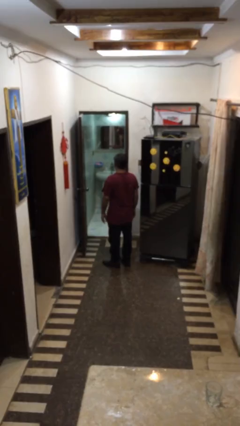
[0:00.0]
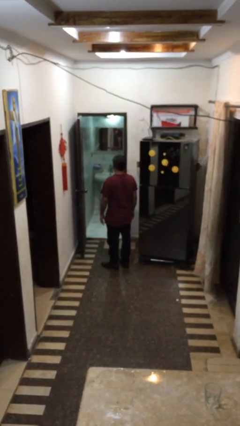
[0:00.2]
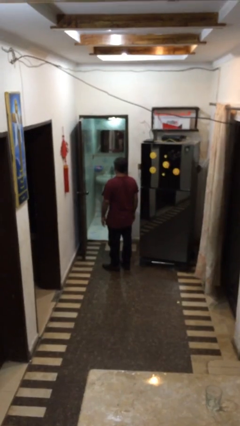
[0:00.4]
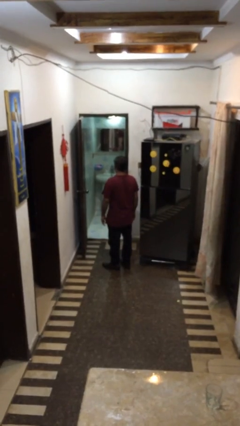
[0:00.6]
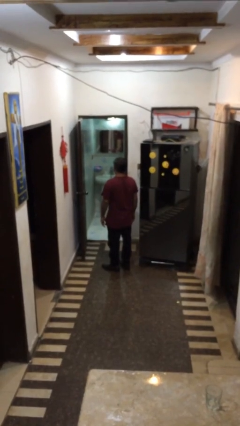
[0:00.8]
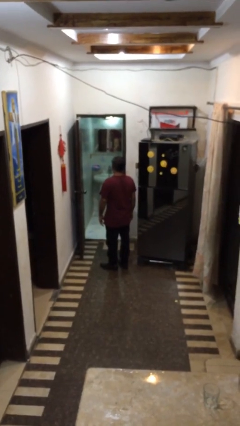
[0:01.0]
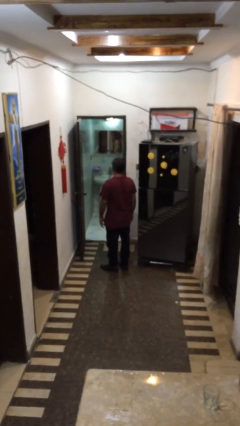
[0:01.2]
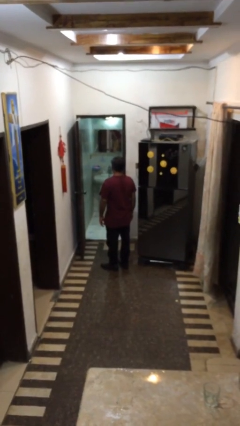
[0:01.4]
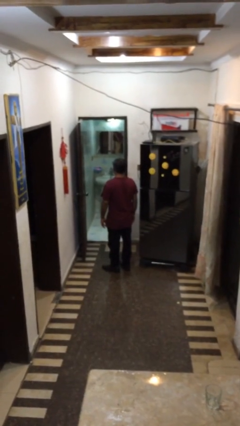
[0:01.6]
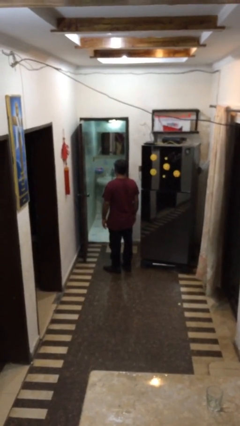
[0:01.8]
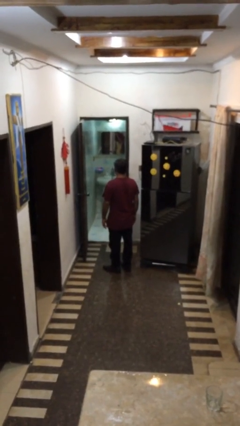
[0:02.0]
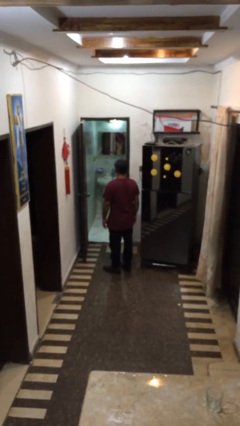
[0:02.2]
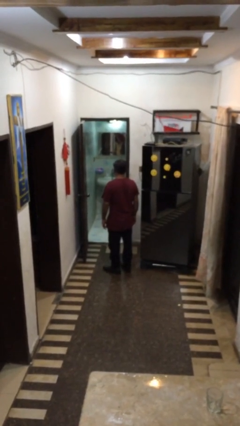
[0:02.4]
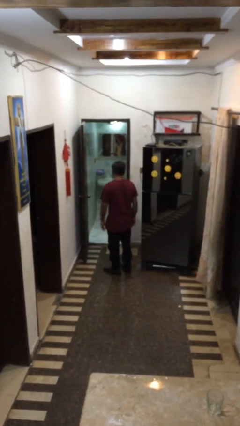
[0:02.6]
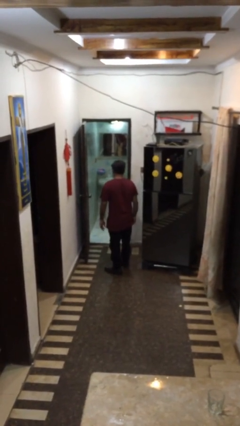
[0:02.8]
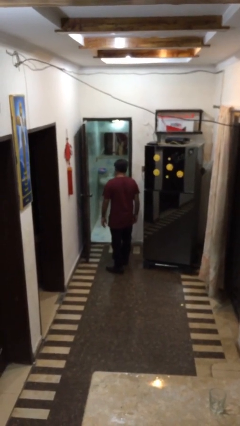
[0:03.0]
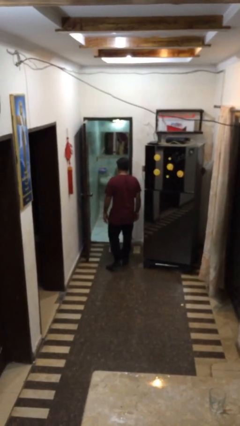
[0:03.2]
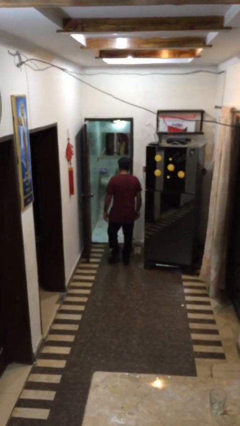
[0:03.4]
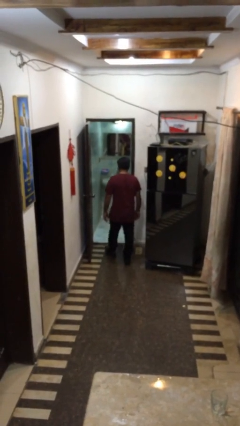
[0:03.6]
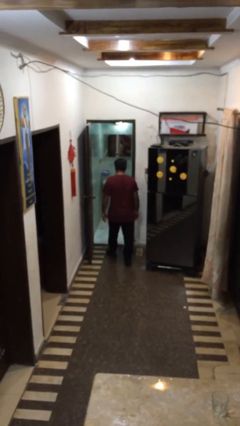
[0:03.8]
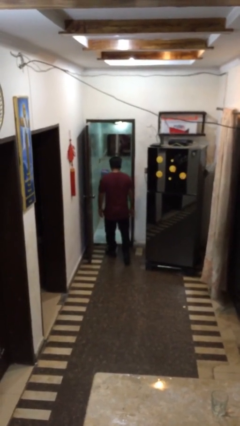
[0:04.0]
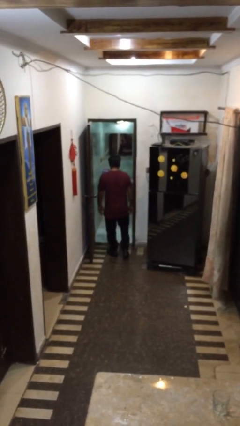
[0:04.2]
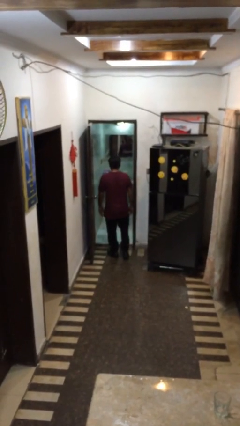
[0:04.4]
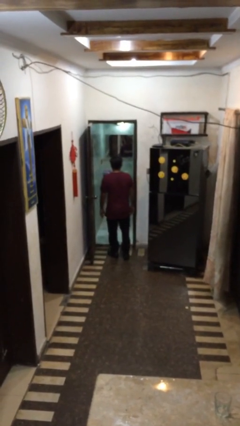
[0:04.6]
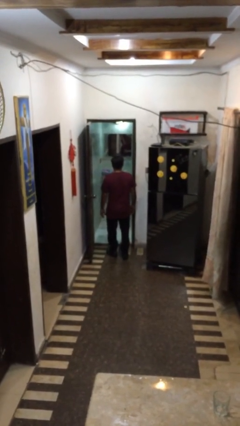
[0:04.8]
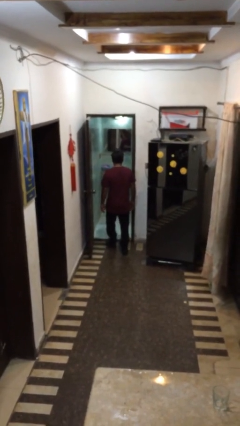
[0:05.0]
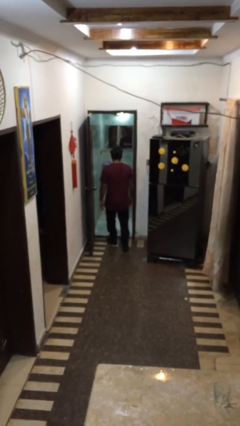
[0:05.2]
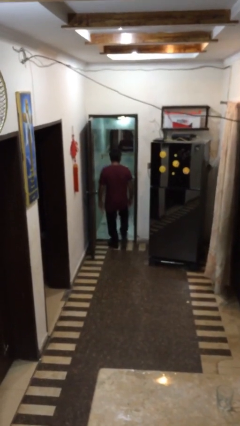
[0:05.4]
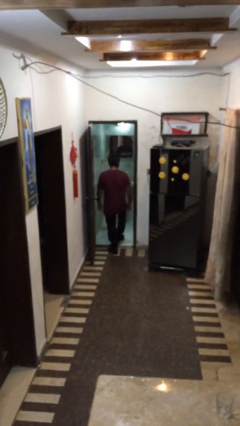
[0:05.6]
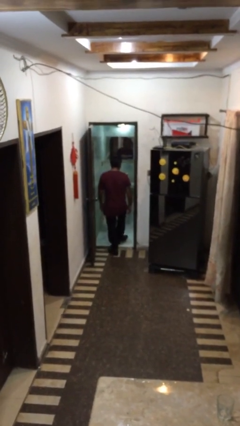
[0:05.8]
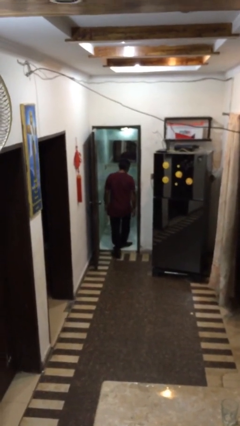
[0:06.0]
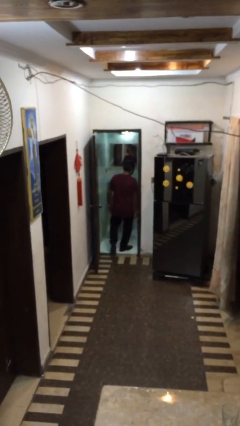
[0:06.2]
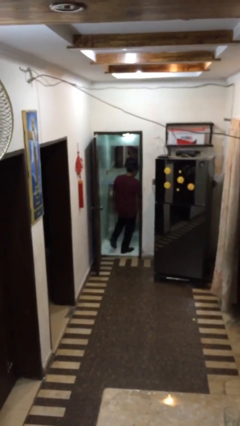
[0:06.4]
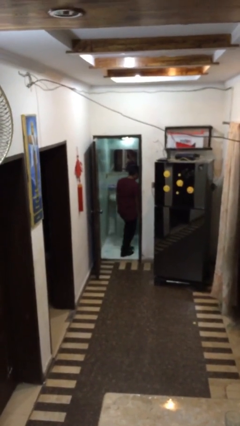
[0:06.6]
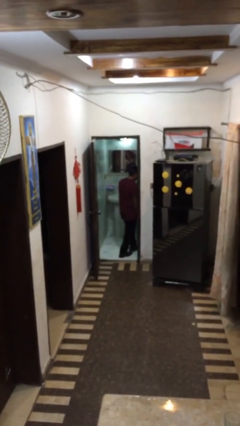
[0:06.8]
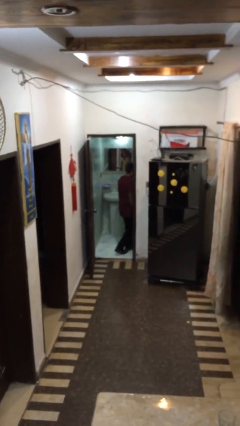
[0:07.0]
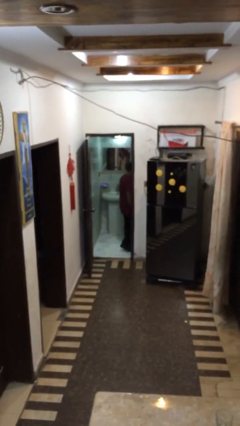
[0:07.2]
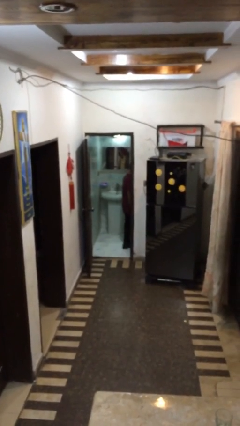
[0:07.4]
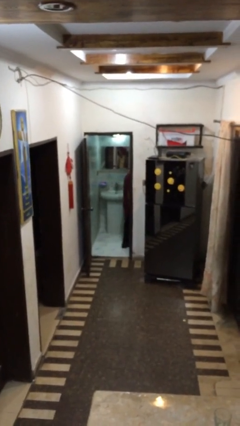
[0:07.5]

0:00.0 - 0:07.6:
person exits scene through structure

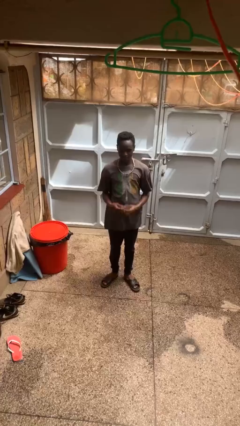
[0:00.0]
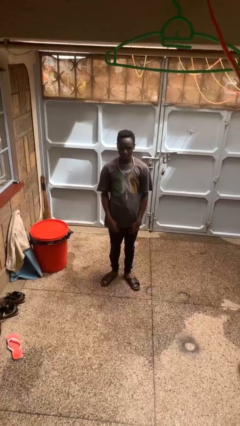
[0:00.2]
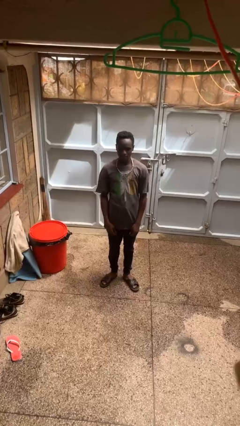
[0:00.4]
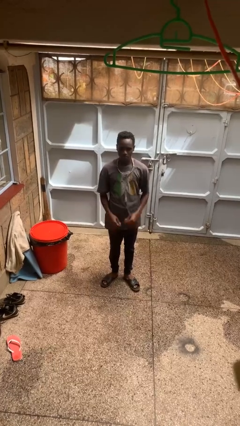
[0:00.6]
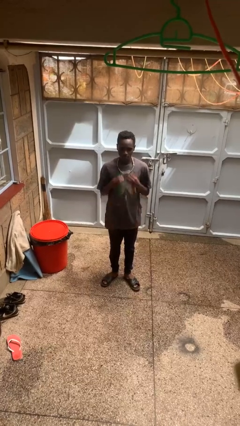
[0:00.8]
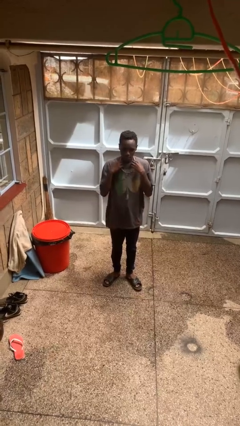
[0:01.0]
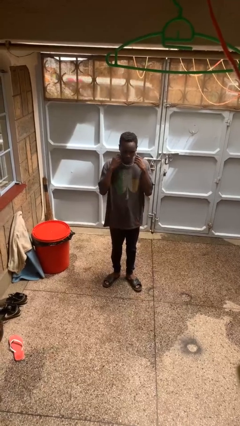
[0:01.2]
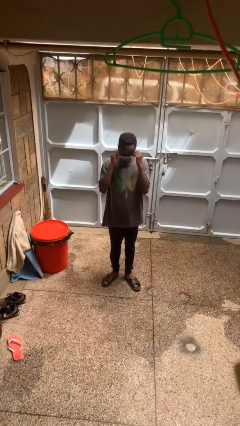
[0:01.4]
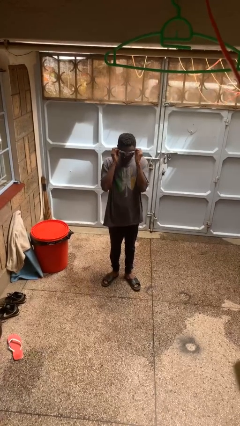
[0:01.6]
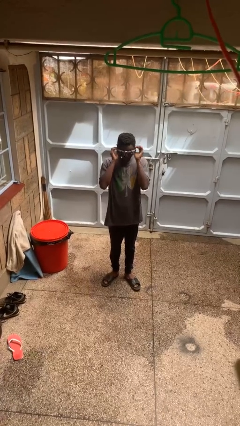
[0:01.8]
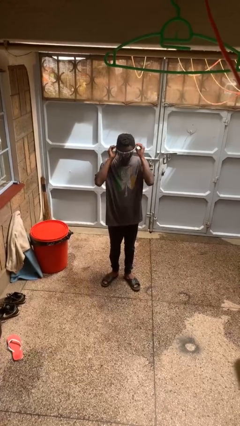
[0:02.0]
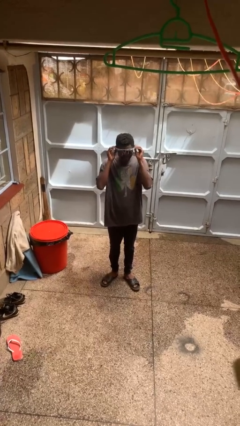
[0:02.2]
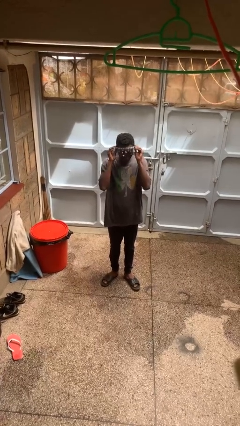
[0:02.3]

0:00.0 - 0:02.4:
person takes off necklace

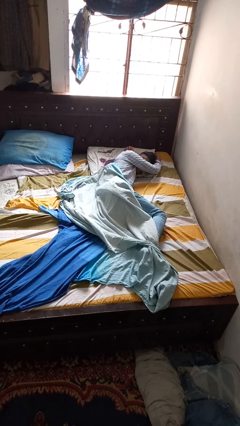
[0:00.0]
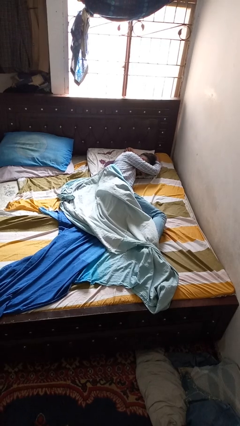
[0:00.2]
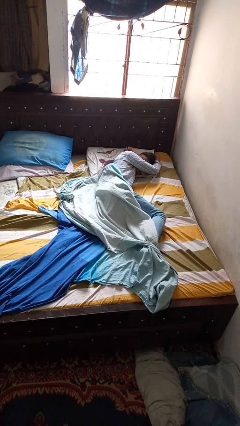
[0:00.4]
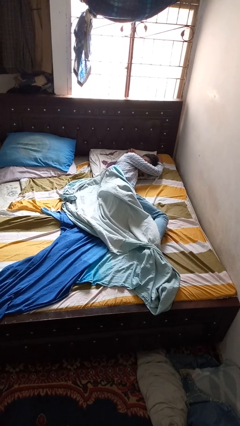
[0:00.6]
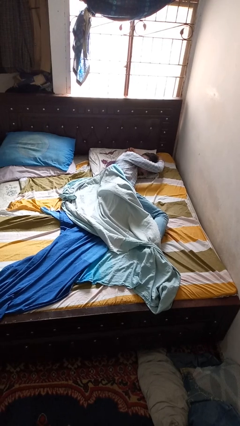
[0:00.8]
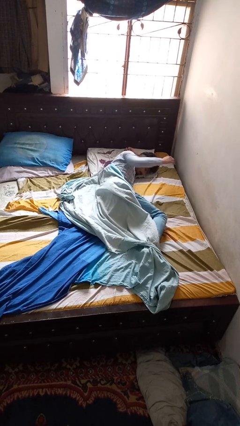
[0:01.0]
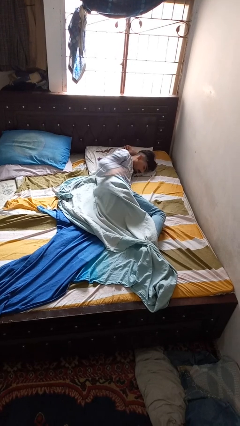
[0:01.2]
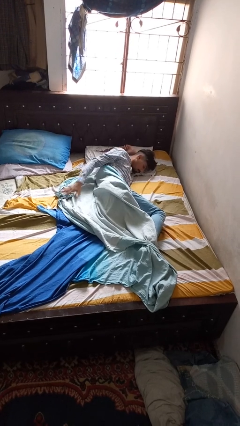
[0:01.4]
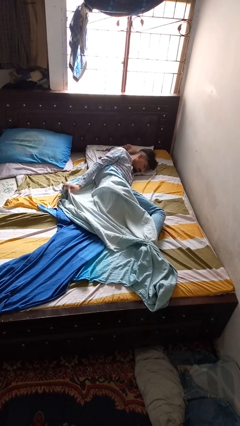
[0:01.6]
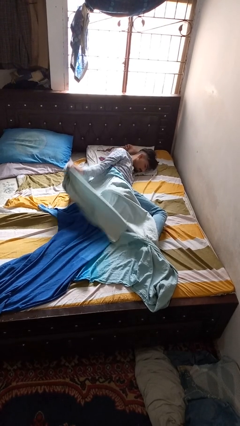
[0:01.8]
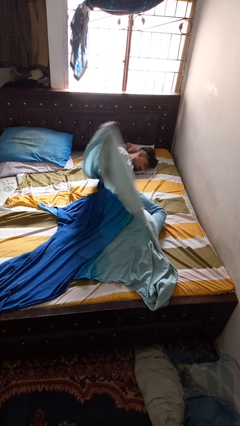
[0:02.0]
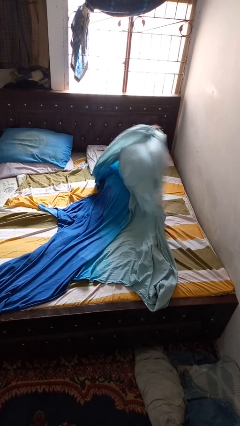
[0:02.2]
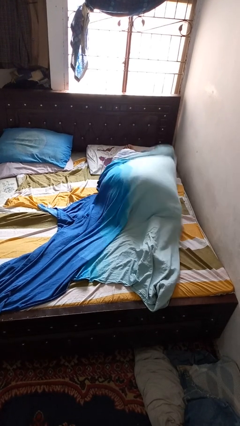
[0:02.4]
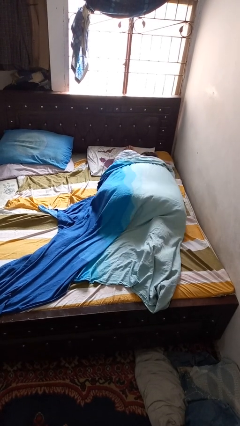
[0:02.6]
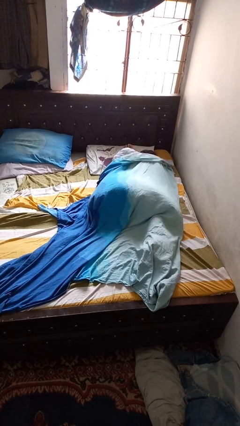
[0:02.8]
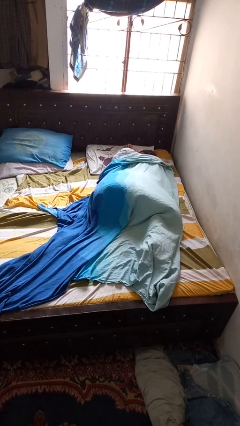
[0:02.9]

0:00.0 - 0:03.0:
person covers with blanket

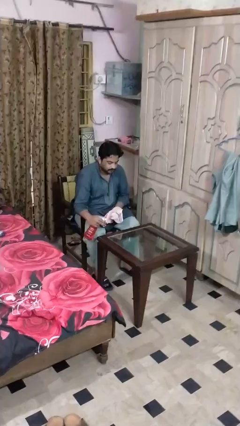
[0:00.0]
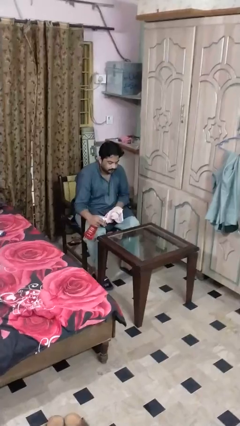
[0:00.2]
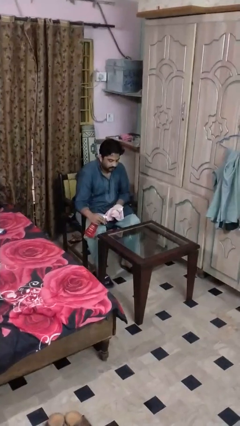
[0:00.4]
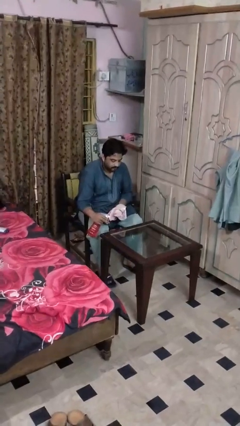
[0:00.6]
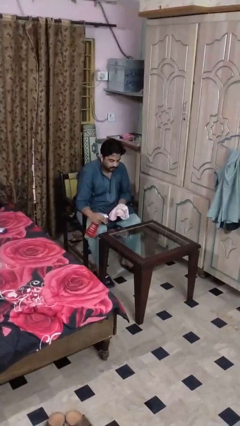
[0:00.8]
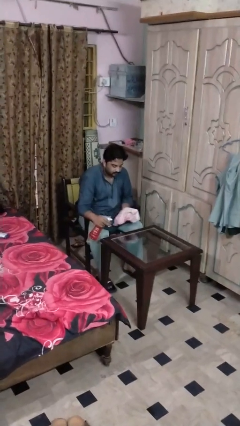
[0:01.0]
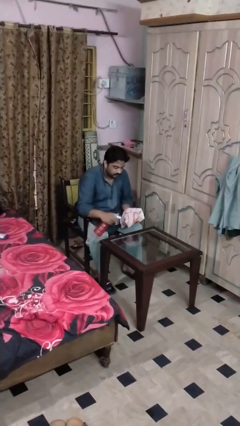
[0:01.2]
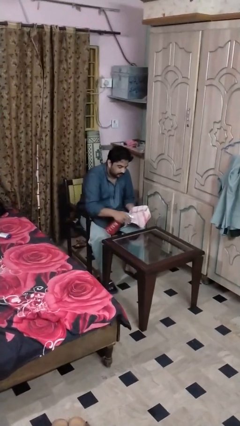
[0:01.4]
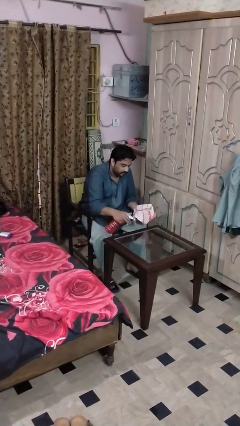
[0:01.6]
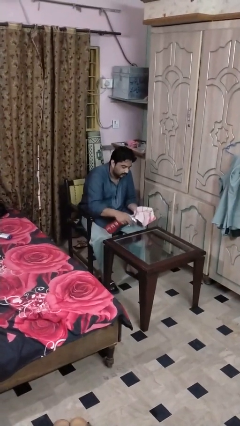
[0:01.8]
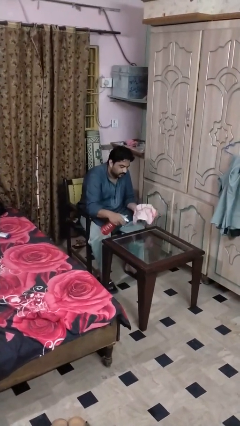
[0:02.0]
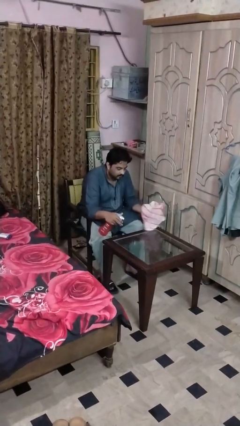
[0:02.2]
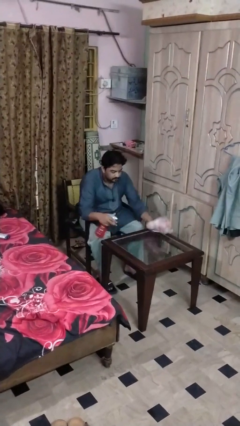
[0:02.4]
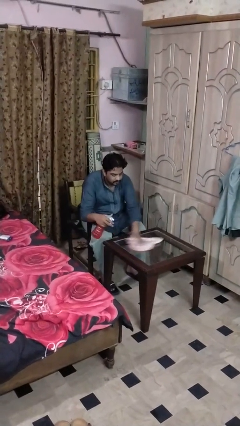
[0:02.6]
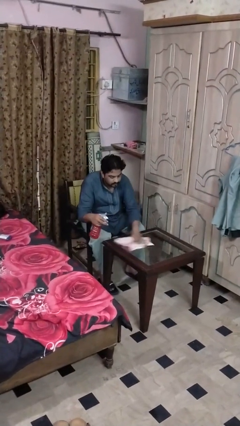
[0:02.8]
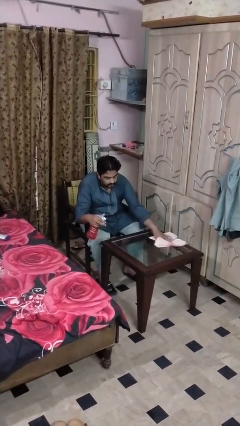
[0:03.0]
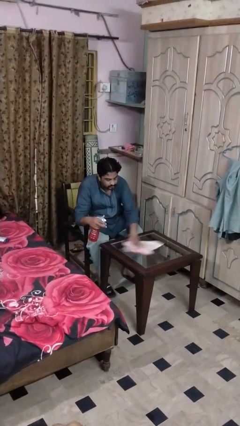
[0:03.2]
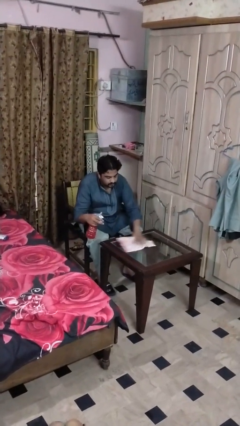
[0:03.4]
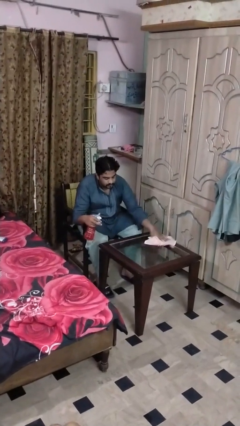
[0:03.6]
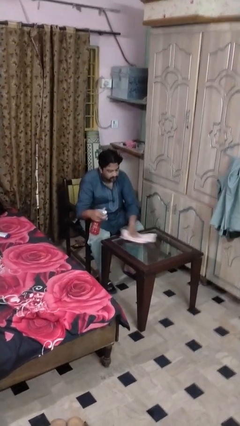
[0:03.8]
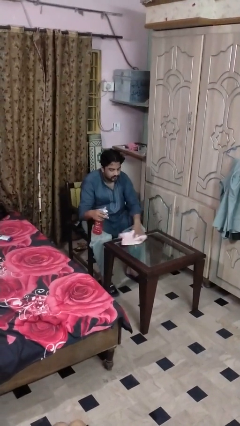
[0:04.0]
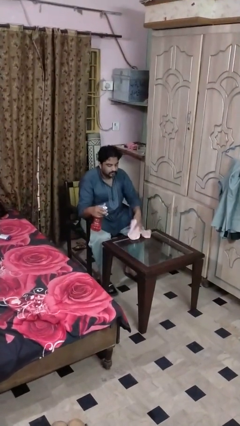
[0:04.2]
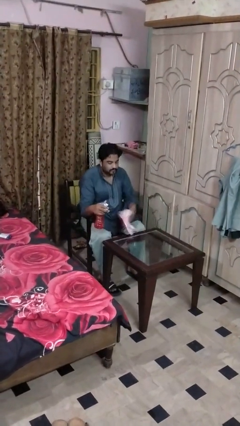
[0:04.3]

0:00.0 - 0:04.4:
person sprays from bottle

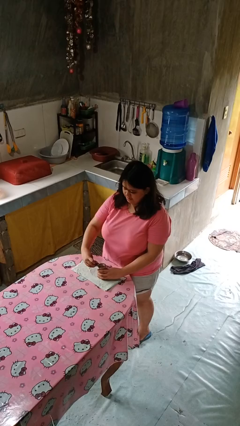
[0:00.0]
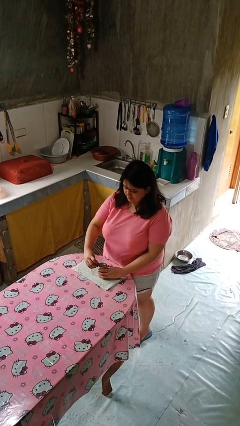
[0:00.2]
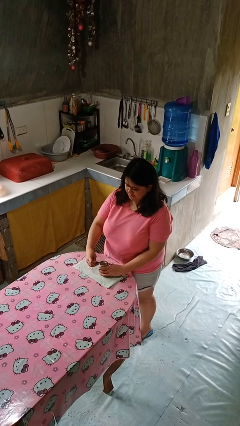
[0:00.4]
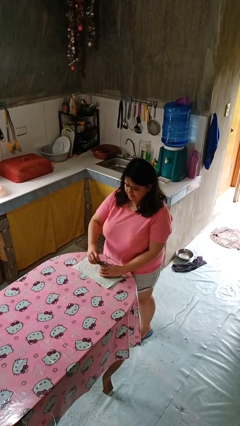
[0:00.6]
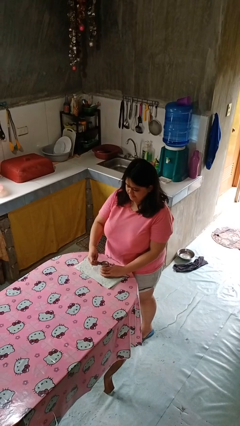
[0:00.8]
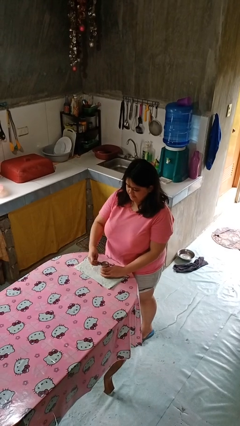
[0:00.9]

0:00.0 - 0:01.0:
person opens can with can opener
